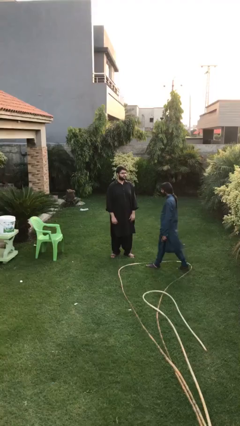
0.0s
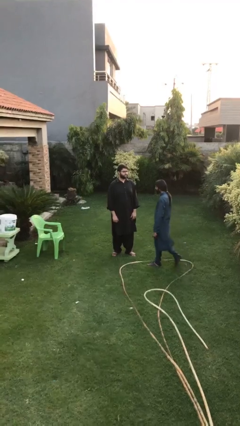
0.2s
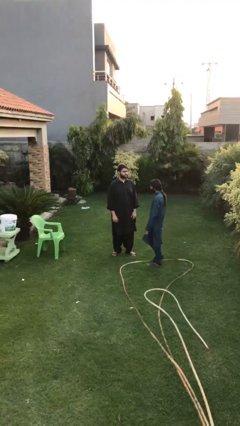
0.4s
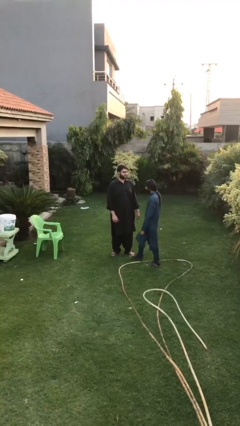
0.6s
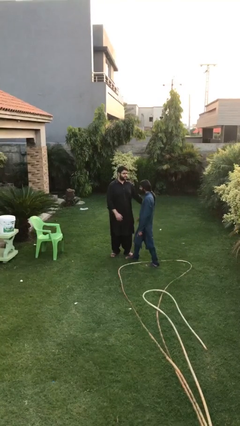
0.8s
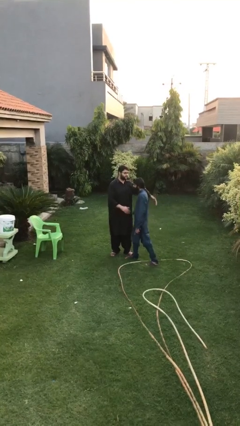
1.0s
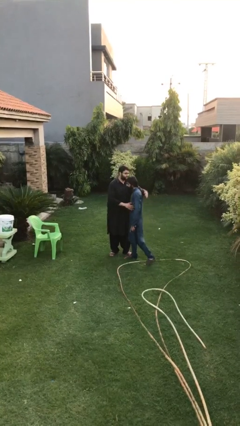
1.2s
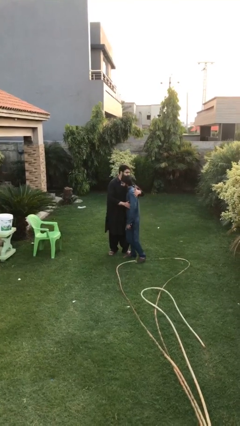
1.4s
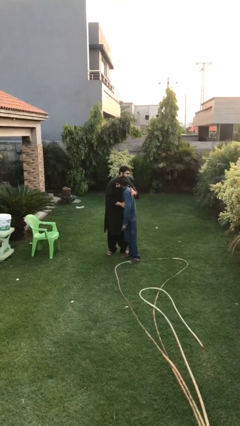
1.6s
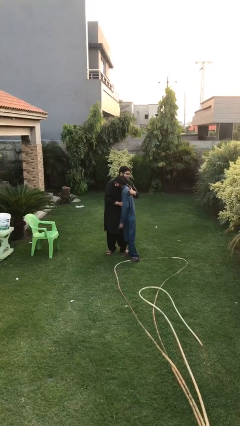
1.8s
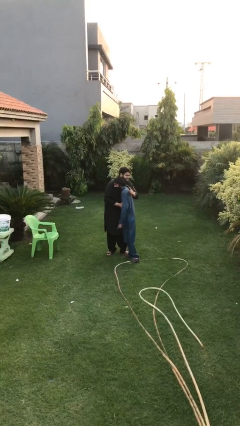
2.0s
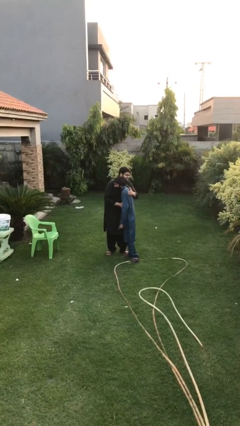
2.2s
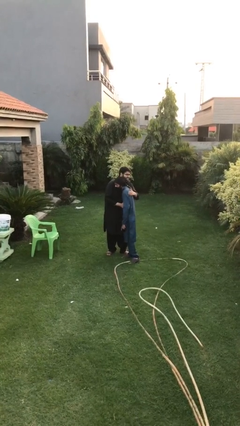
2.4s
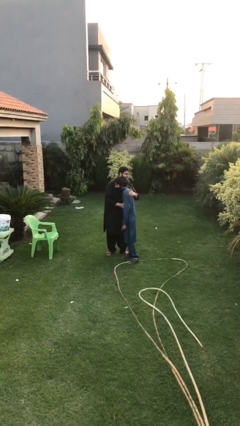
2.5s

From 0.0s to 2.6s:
person embraces person

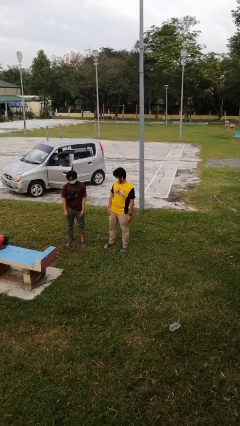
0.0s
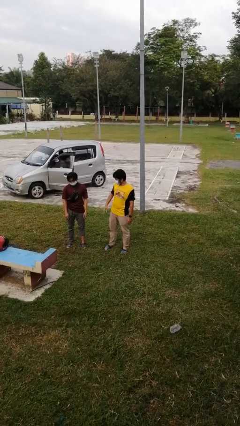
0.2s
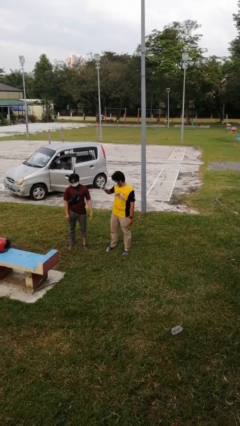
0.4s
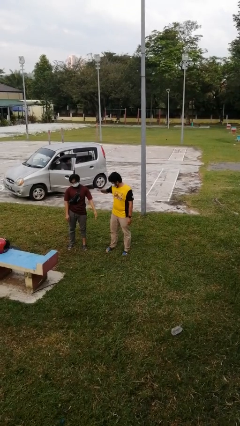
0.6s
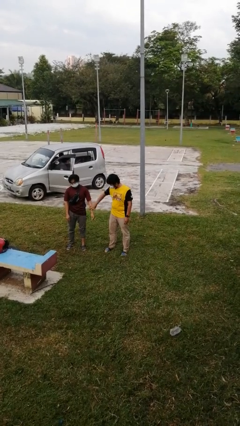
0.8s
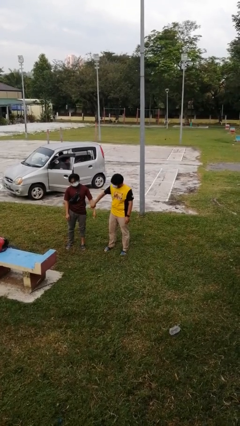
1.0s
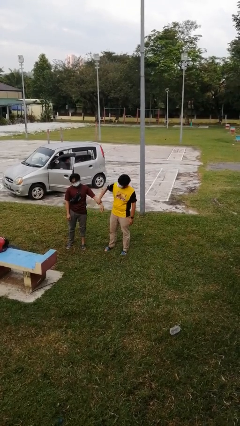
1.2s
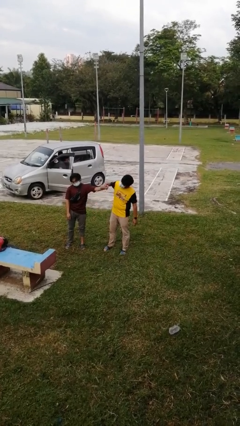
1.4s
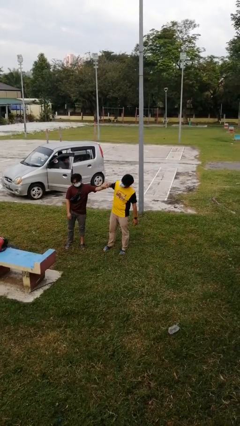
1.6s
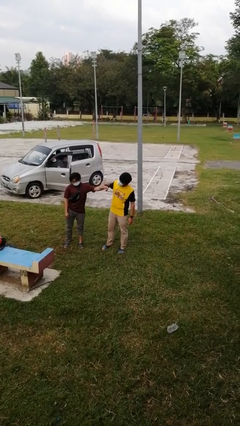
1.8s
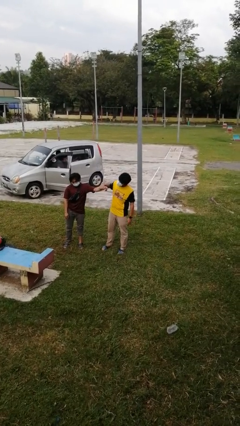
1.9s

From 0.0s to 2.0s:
person grabs person by forearm

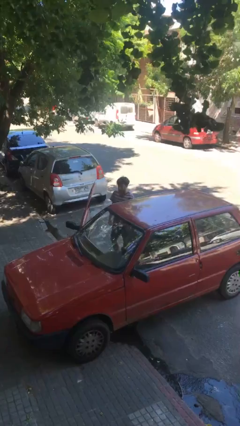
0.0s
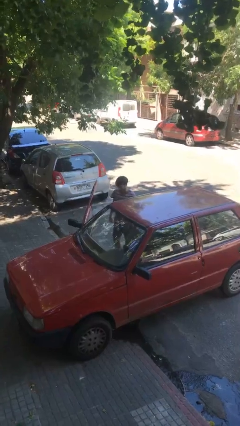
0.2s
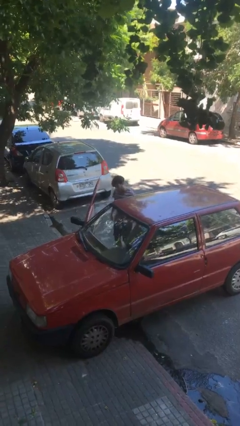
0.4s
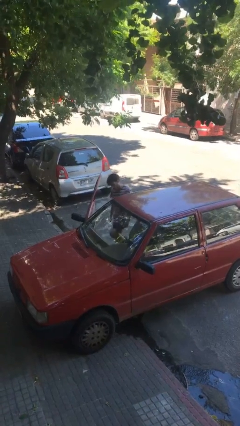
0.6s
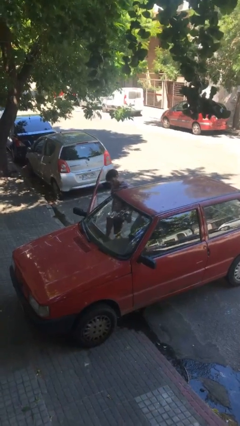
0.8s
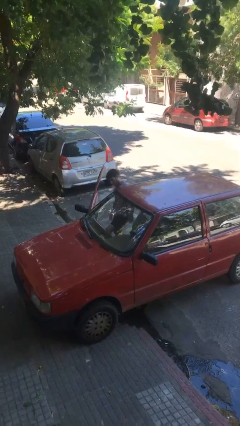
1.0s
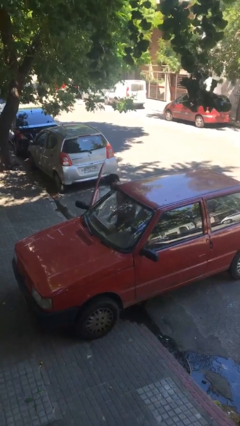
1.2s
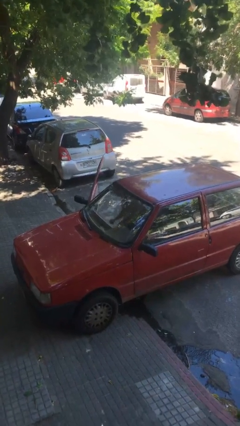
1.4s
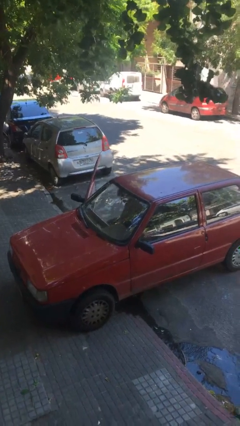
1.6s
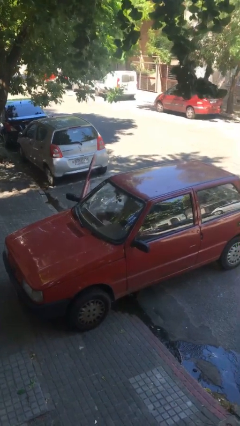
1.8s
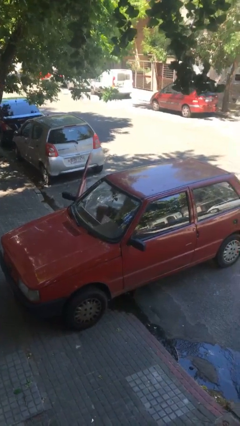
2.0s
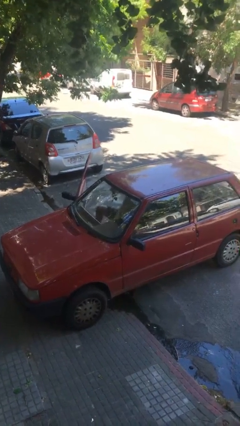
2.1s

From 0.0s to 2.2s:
person enters car

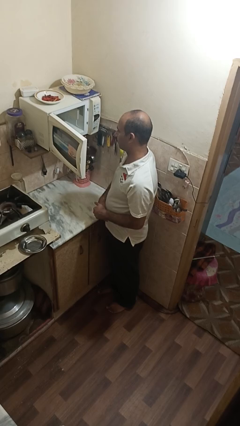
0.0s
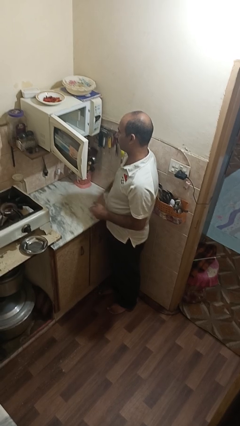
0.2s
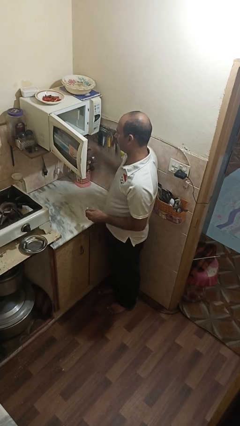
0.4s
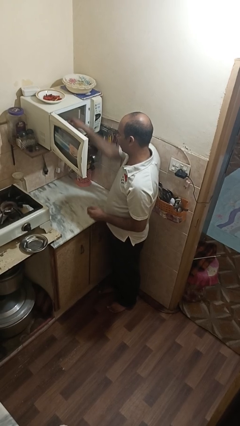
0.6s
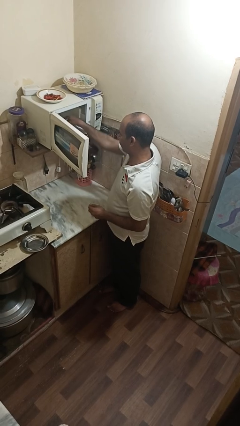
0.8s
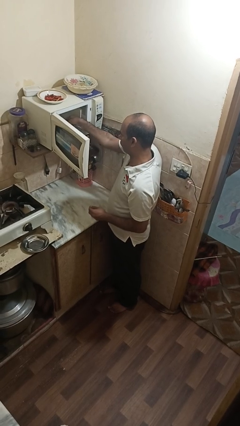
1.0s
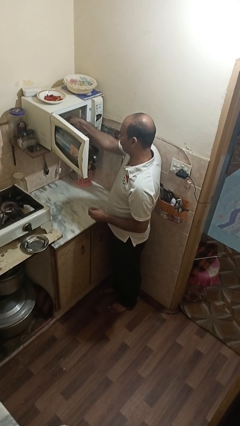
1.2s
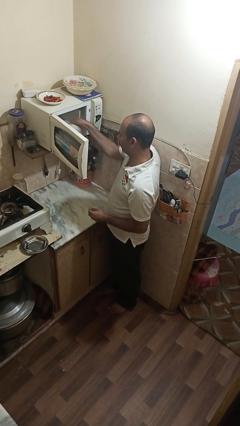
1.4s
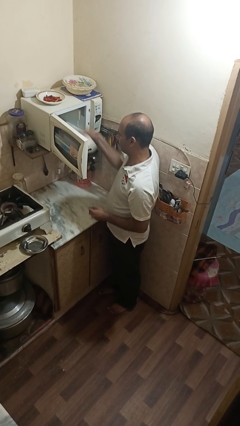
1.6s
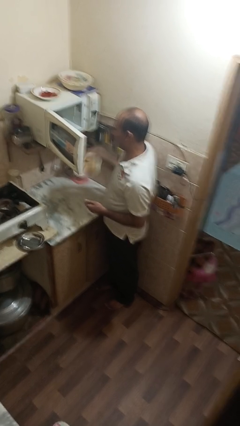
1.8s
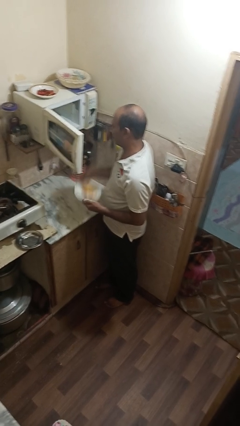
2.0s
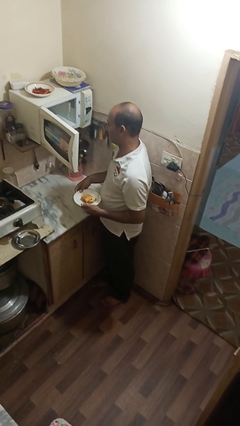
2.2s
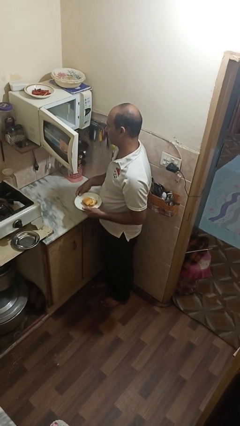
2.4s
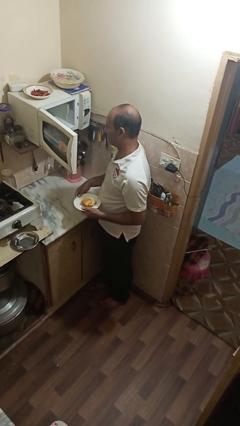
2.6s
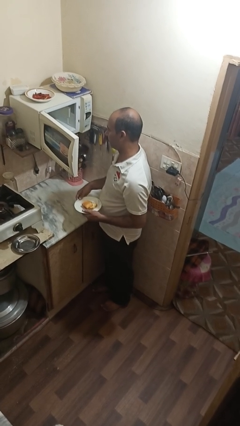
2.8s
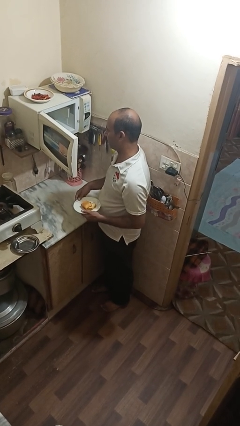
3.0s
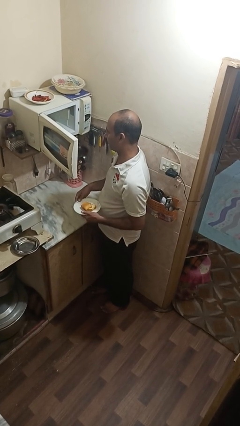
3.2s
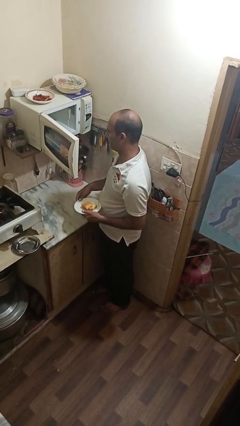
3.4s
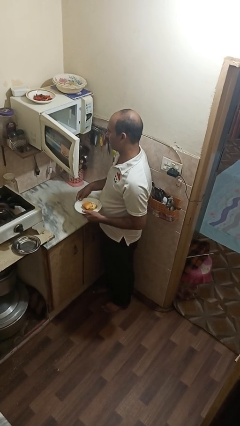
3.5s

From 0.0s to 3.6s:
person takes object from microwave

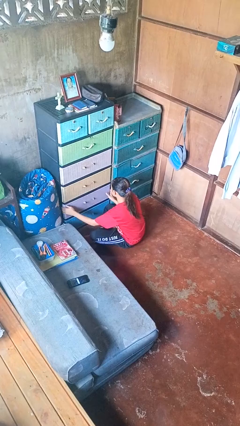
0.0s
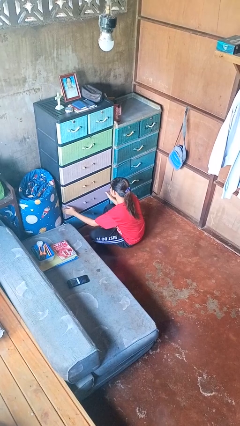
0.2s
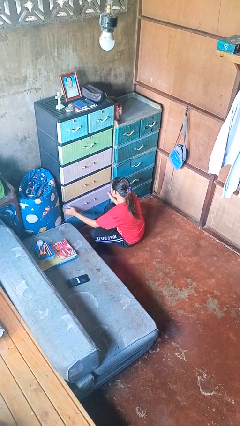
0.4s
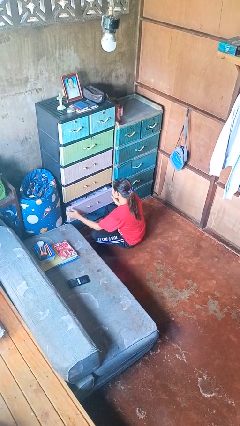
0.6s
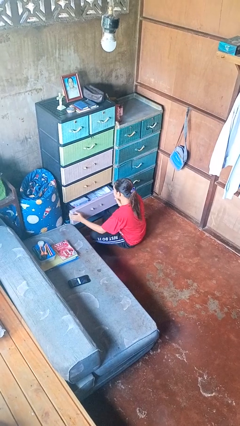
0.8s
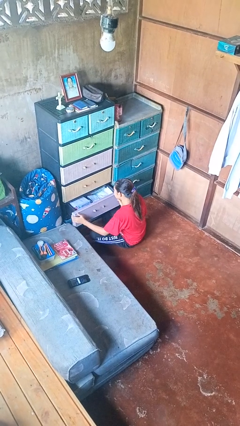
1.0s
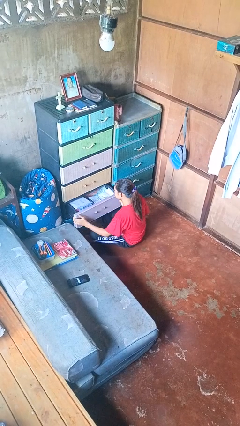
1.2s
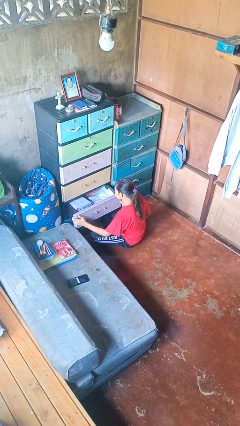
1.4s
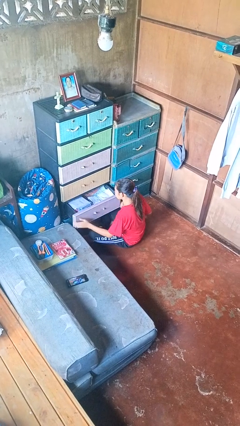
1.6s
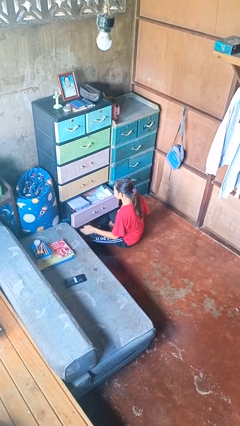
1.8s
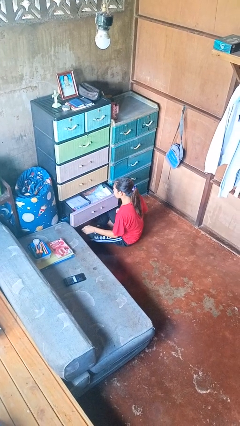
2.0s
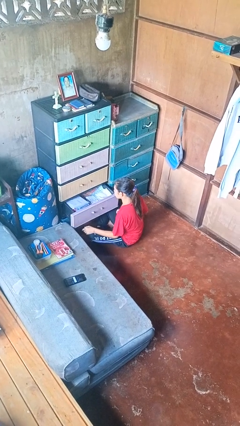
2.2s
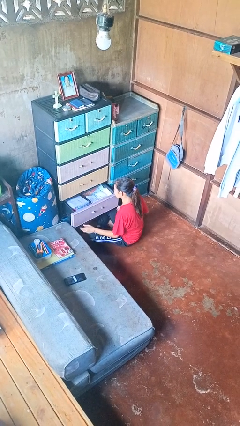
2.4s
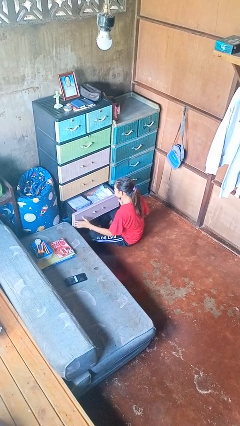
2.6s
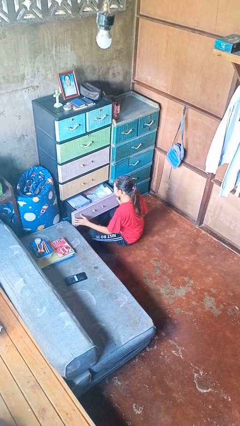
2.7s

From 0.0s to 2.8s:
person opens dresser drawer

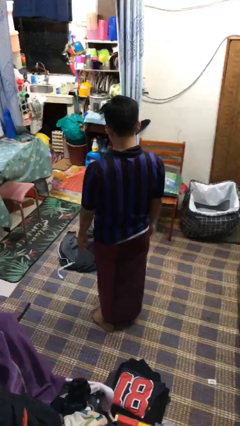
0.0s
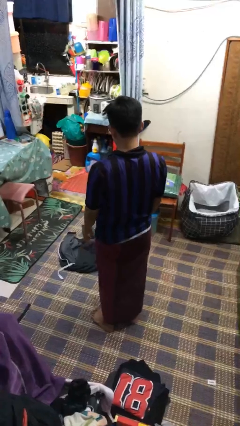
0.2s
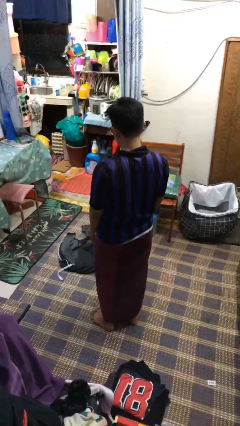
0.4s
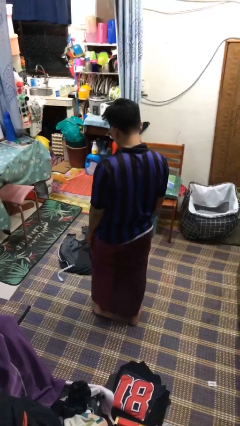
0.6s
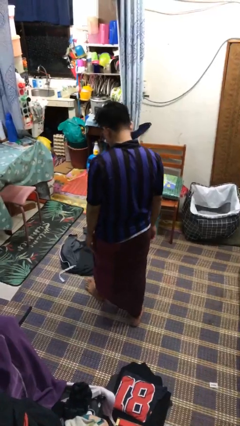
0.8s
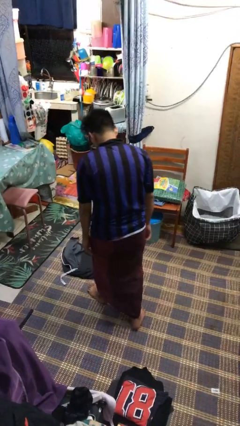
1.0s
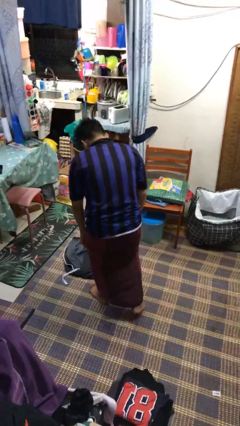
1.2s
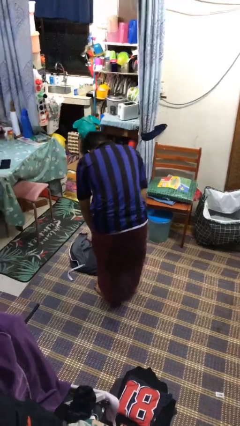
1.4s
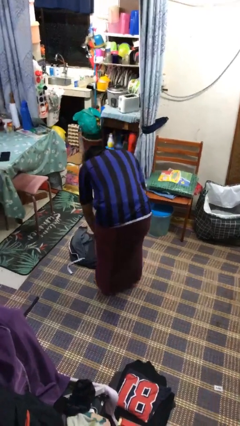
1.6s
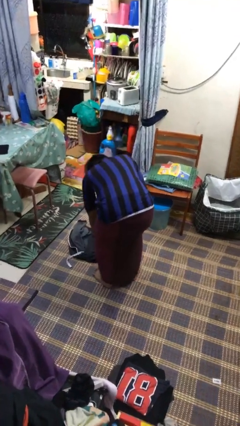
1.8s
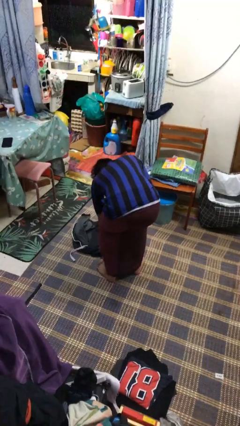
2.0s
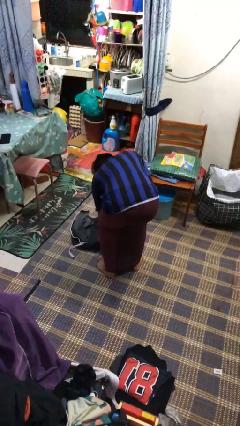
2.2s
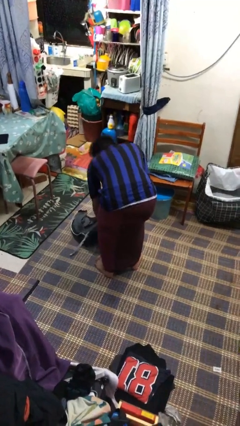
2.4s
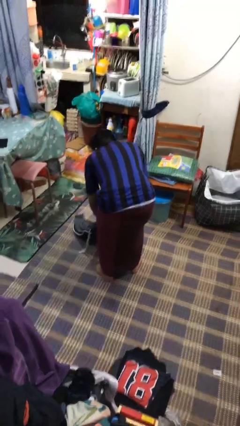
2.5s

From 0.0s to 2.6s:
person picks up object from floor

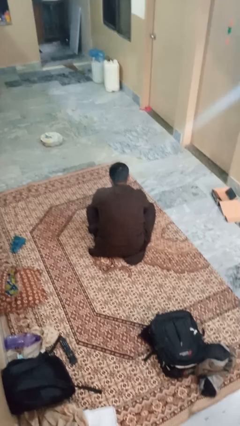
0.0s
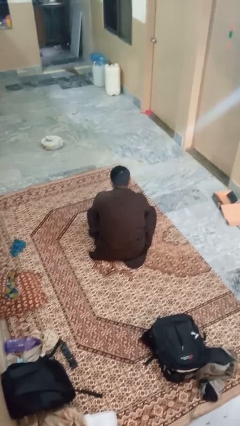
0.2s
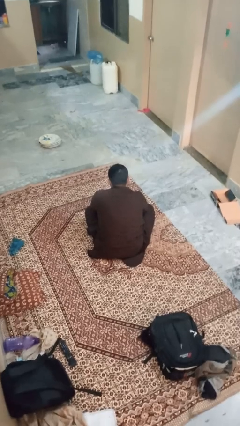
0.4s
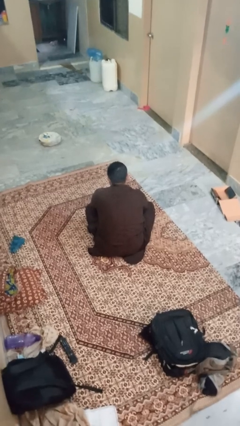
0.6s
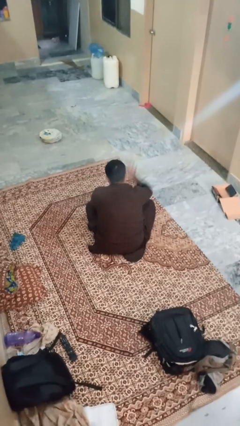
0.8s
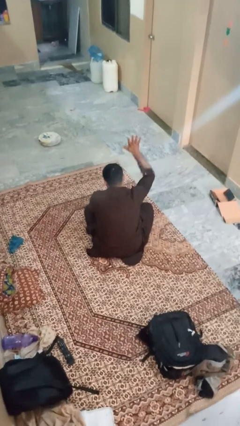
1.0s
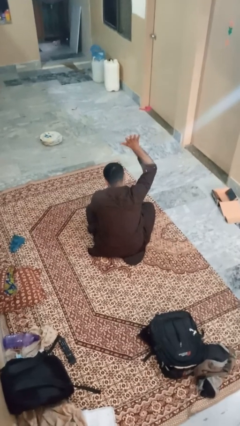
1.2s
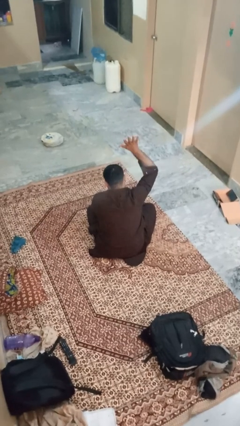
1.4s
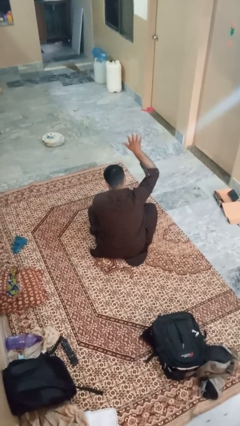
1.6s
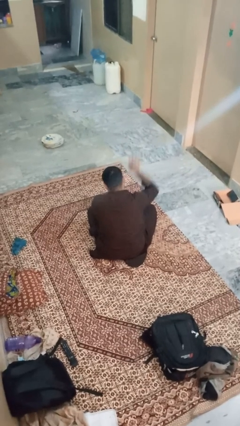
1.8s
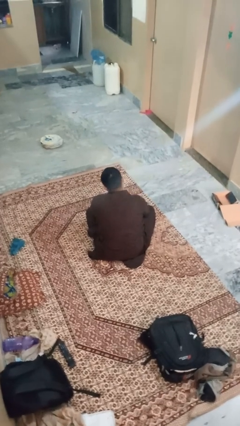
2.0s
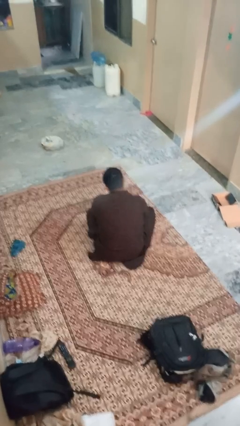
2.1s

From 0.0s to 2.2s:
person gestures number five
